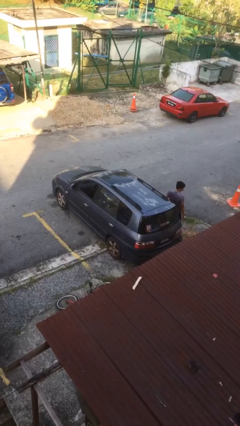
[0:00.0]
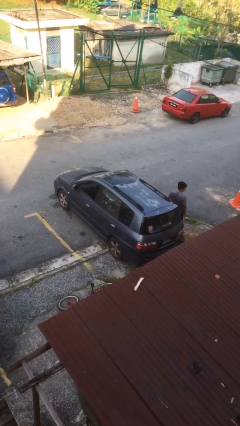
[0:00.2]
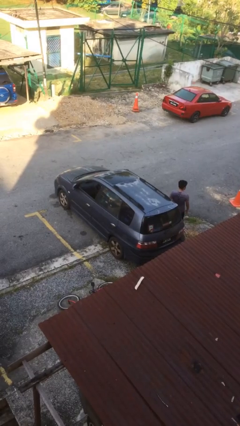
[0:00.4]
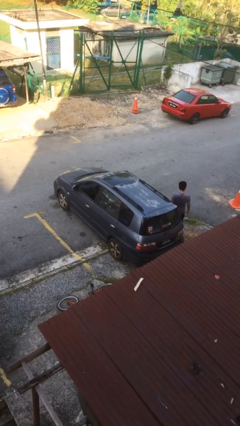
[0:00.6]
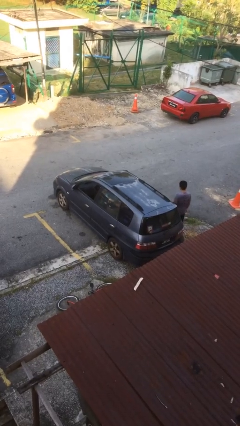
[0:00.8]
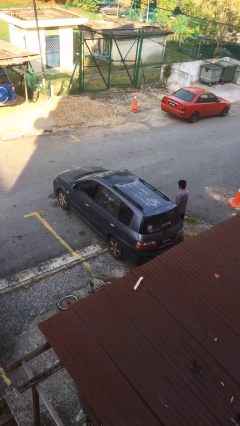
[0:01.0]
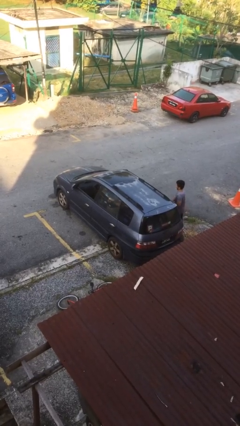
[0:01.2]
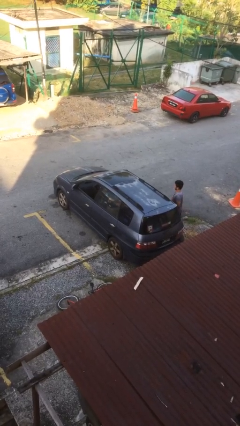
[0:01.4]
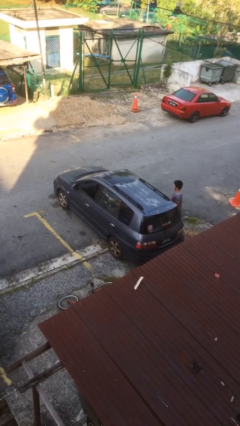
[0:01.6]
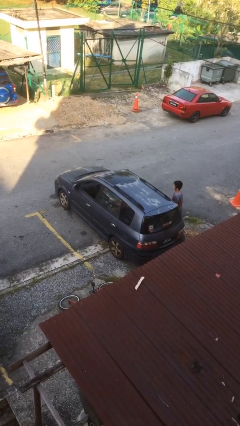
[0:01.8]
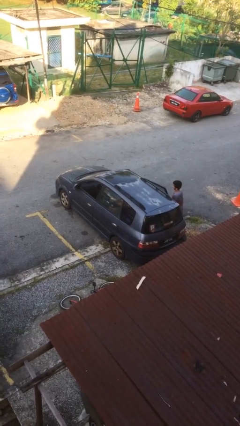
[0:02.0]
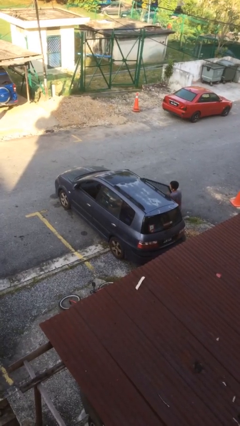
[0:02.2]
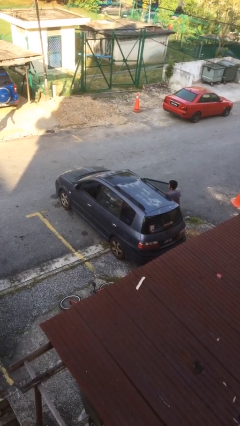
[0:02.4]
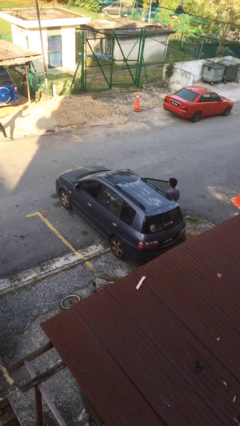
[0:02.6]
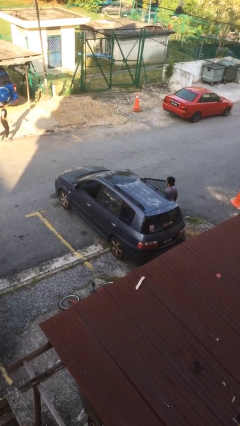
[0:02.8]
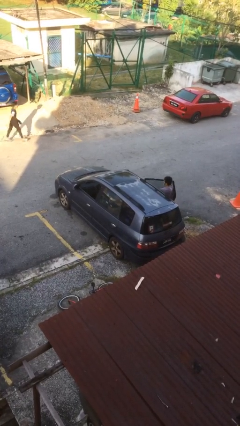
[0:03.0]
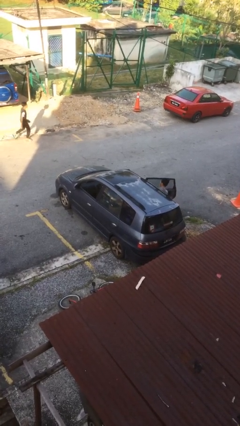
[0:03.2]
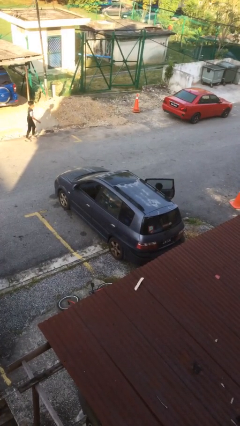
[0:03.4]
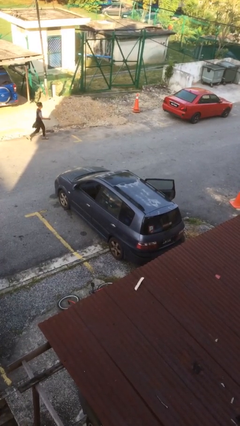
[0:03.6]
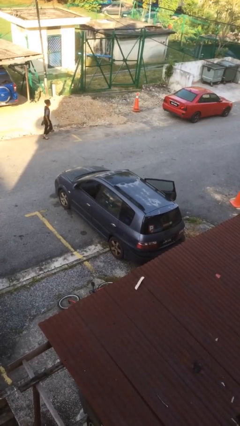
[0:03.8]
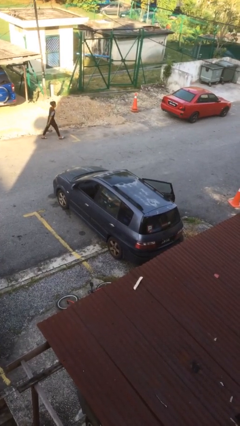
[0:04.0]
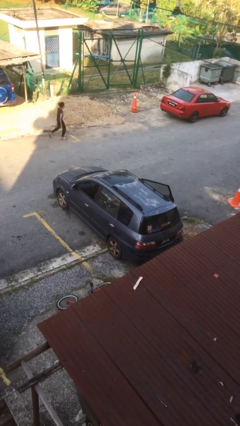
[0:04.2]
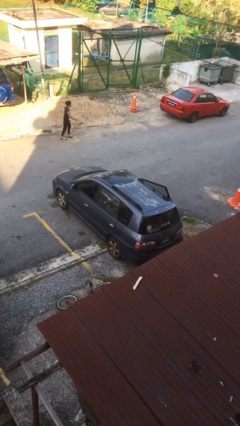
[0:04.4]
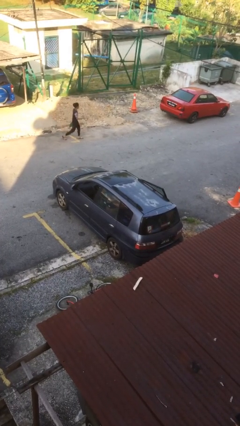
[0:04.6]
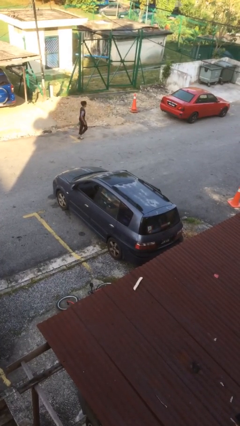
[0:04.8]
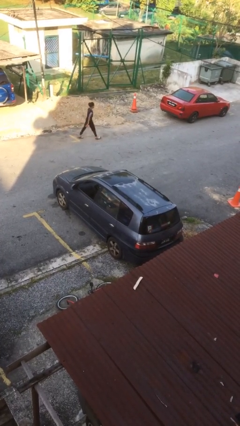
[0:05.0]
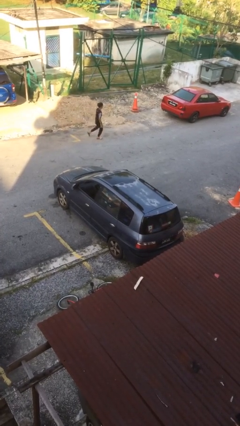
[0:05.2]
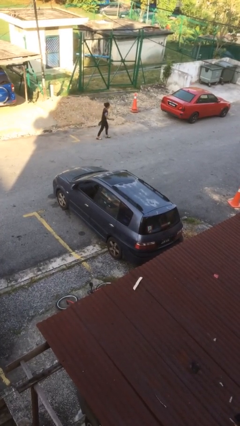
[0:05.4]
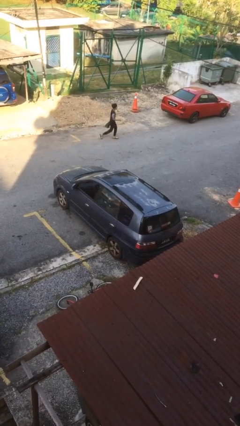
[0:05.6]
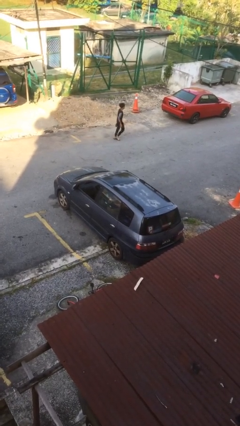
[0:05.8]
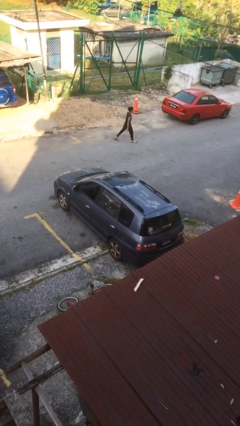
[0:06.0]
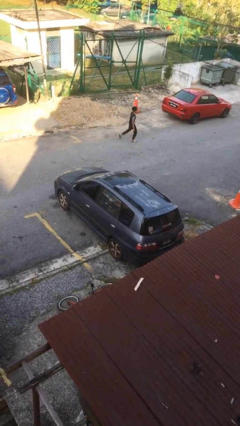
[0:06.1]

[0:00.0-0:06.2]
car picks up person

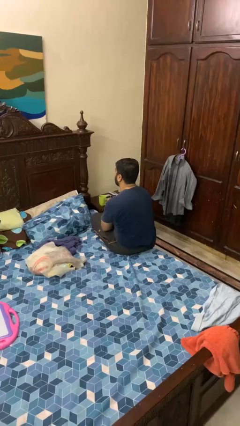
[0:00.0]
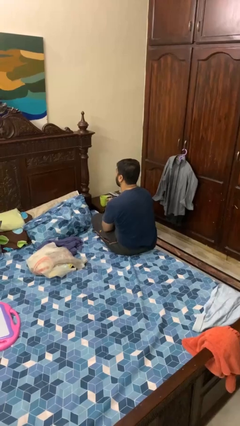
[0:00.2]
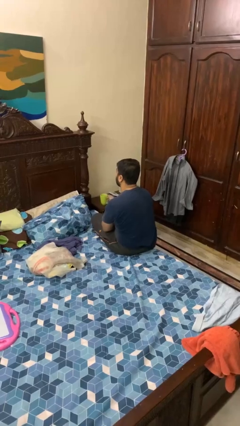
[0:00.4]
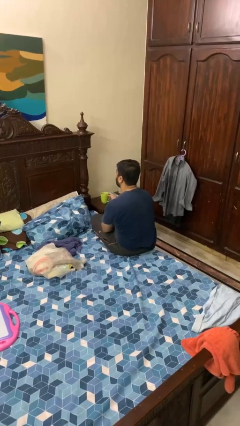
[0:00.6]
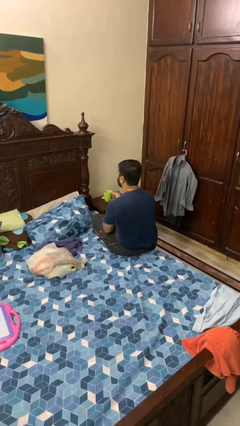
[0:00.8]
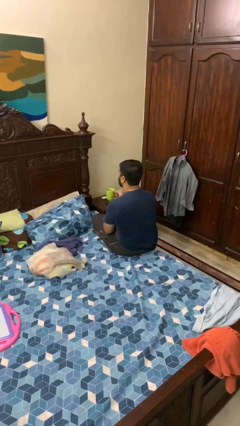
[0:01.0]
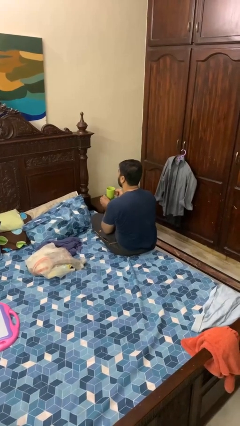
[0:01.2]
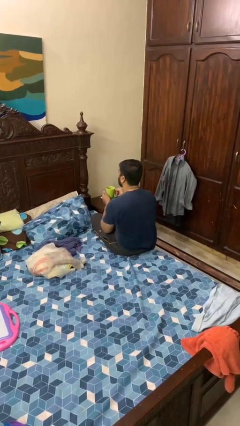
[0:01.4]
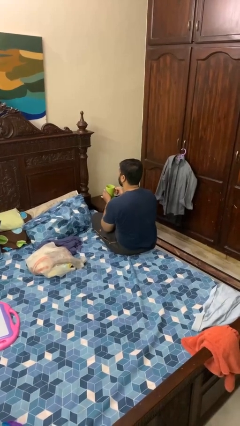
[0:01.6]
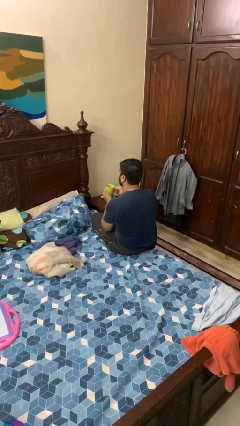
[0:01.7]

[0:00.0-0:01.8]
person picks up object from table

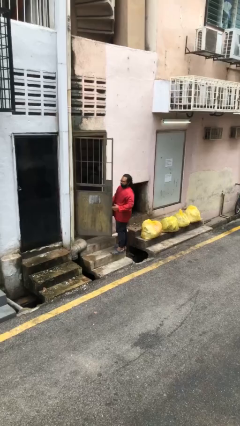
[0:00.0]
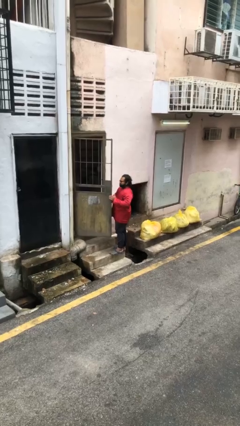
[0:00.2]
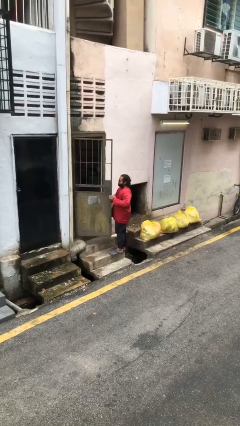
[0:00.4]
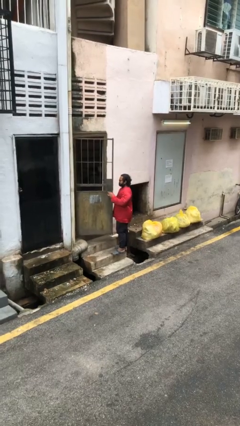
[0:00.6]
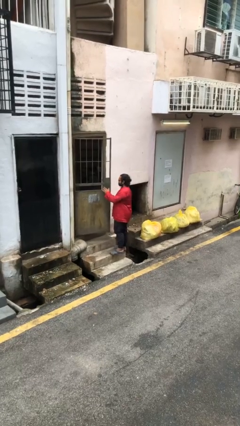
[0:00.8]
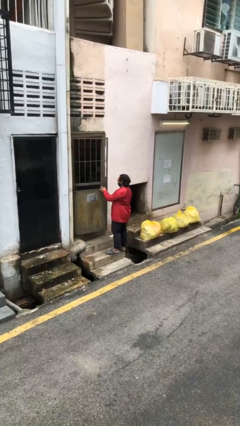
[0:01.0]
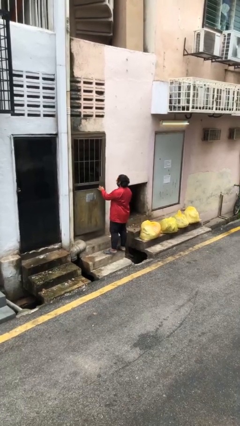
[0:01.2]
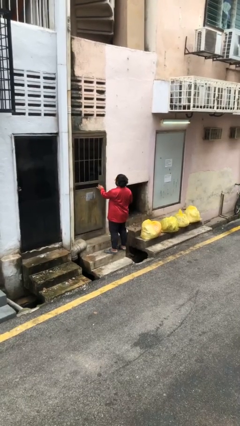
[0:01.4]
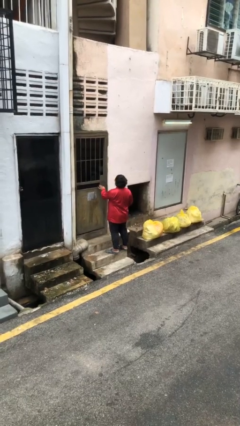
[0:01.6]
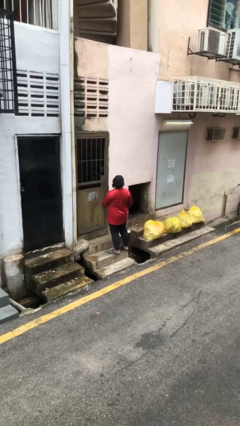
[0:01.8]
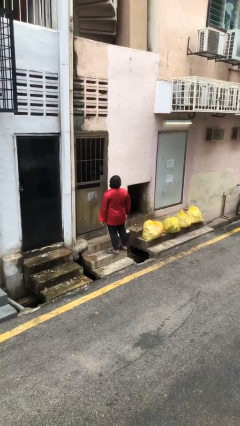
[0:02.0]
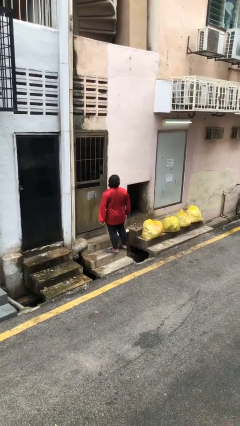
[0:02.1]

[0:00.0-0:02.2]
person closes facility door

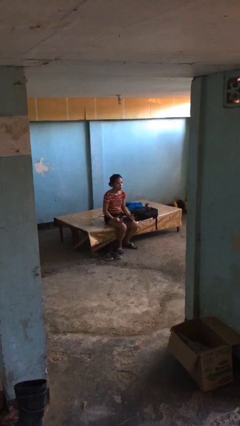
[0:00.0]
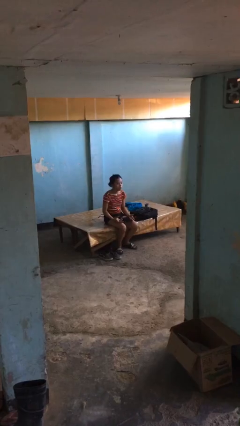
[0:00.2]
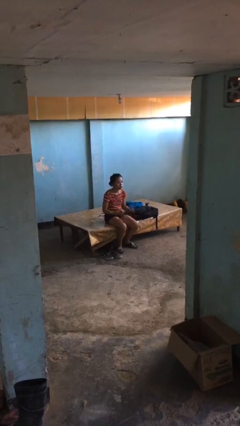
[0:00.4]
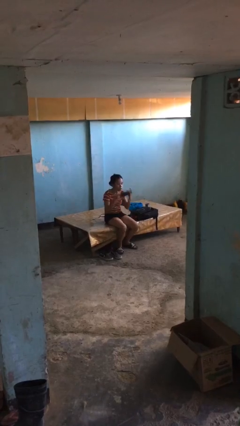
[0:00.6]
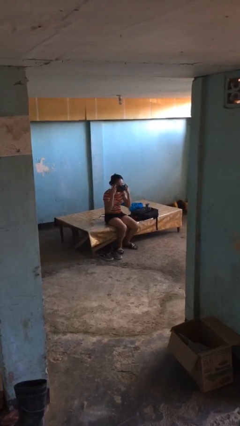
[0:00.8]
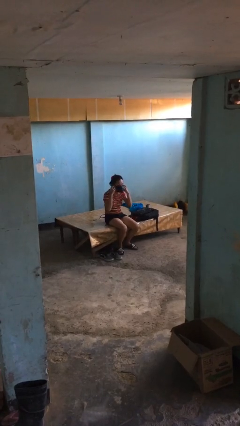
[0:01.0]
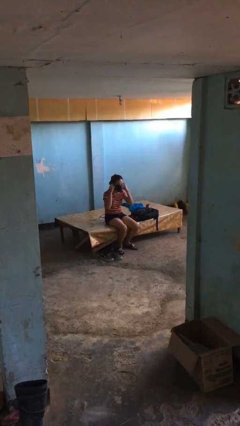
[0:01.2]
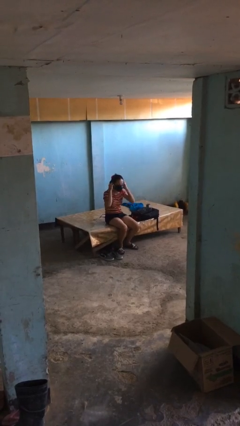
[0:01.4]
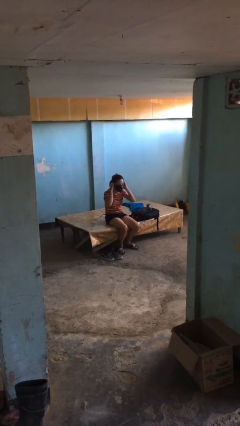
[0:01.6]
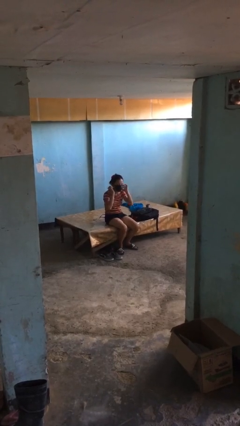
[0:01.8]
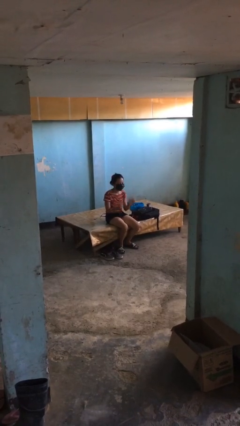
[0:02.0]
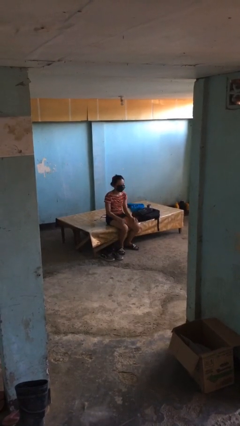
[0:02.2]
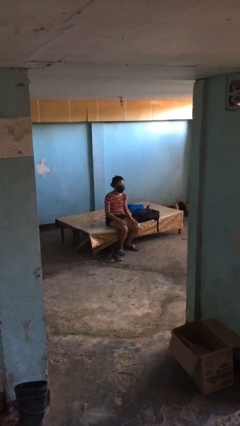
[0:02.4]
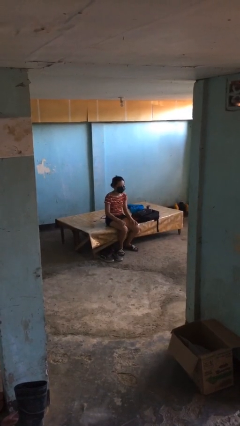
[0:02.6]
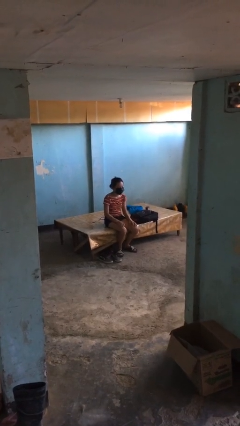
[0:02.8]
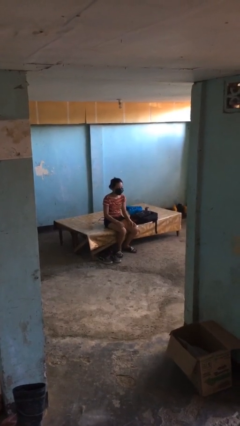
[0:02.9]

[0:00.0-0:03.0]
person puts on facemask

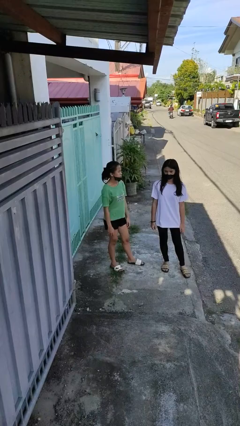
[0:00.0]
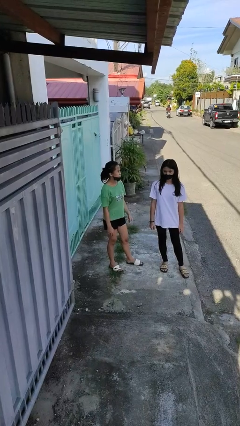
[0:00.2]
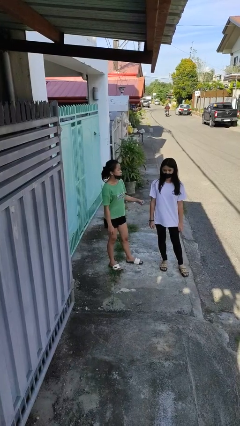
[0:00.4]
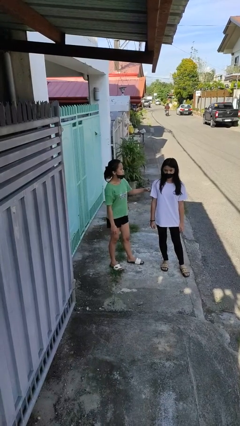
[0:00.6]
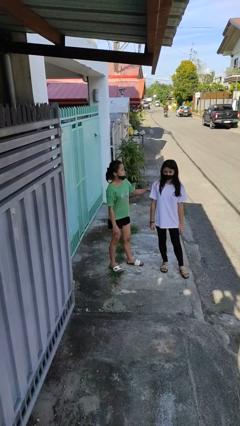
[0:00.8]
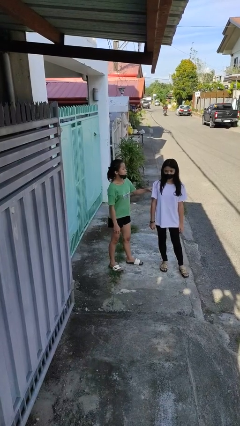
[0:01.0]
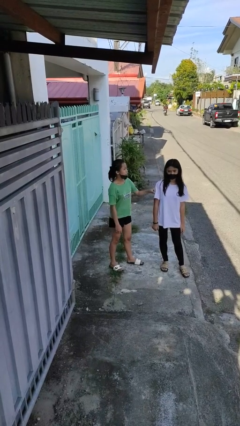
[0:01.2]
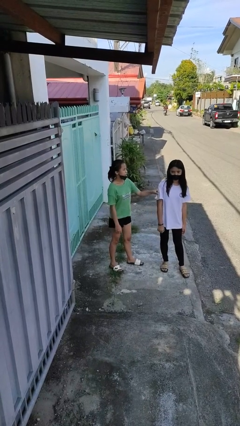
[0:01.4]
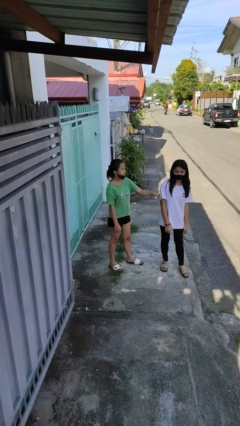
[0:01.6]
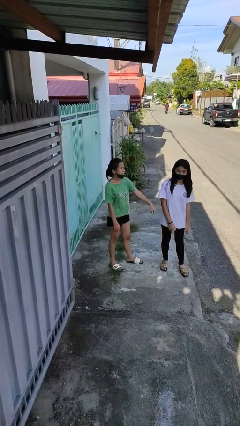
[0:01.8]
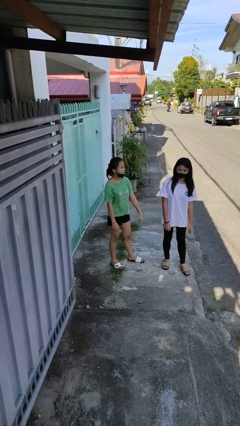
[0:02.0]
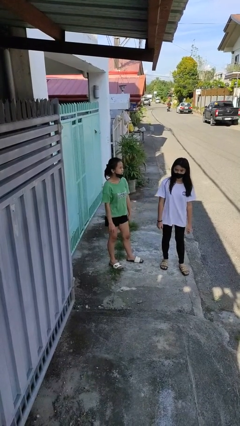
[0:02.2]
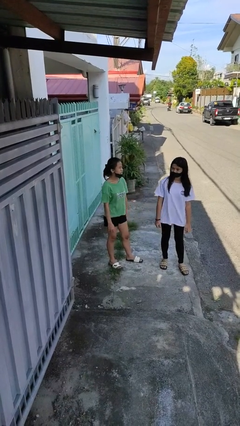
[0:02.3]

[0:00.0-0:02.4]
person pounds shoulders of person

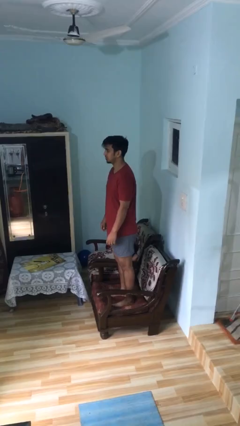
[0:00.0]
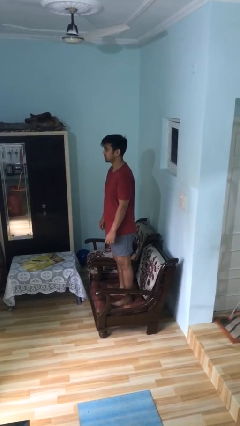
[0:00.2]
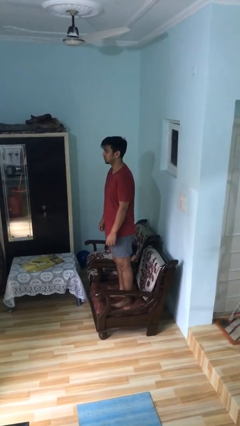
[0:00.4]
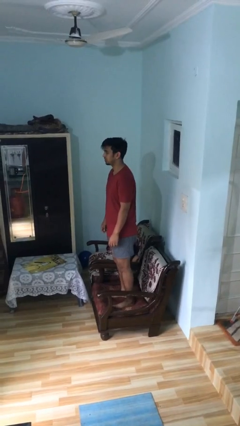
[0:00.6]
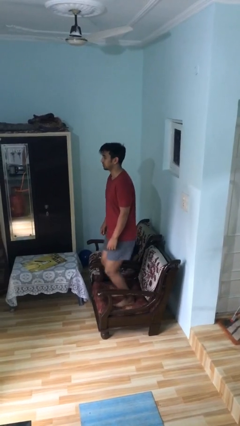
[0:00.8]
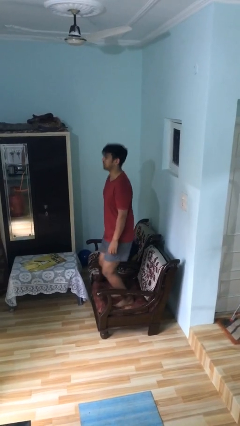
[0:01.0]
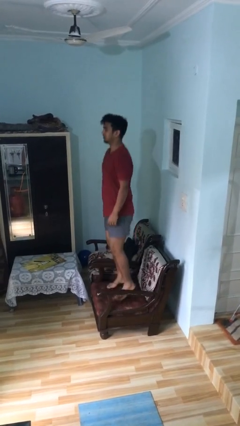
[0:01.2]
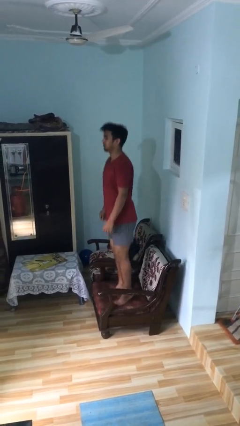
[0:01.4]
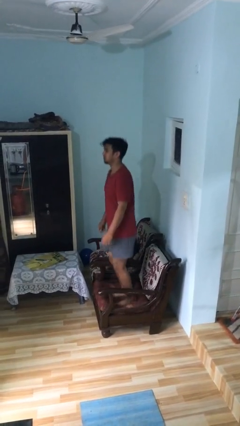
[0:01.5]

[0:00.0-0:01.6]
person jumps on couch

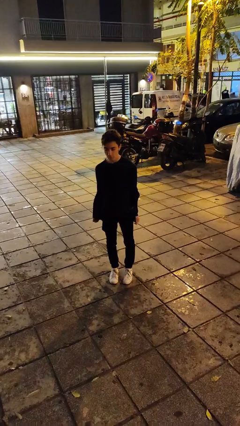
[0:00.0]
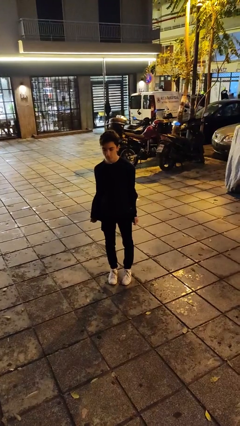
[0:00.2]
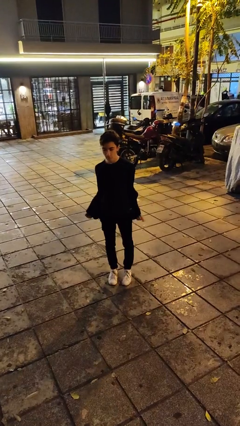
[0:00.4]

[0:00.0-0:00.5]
person takes off jacket
